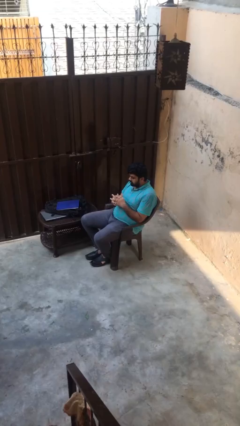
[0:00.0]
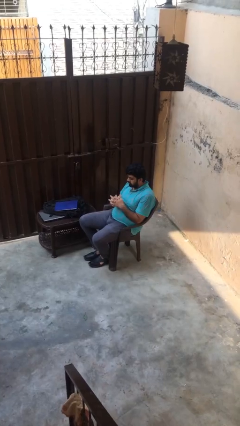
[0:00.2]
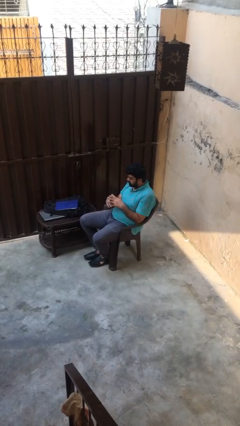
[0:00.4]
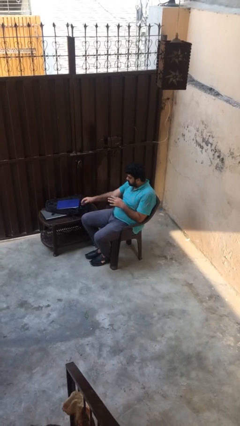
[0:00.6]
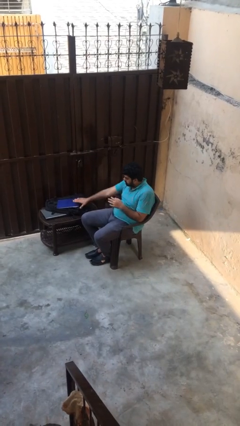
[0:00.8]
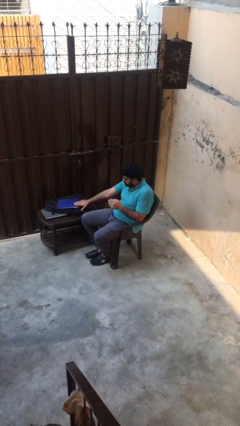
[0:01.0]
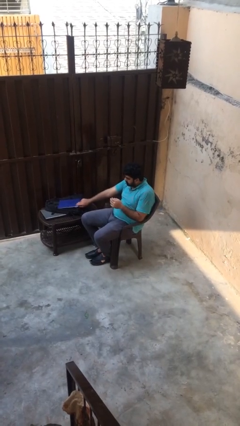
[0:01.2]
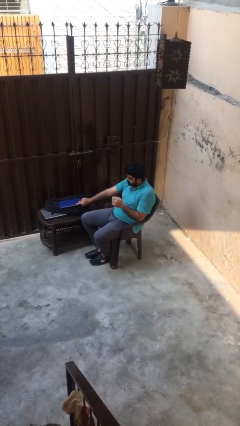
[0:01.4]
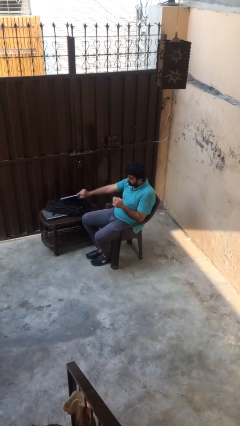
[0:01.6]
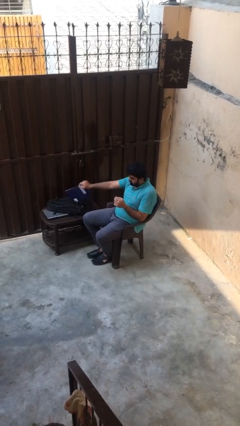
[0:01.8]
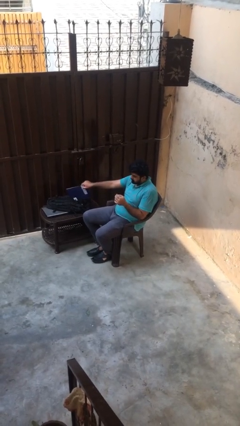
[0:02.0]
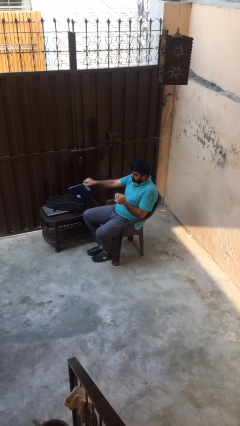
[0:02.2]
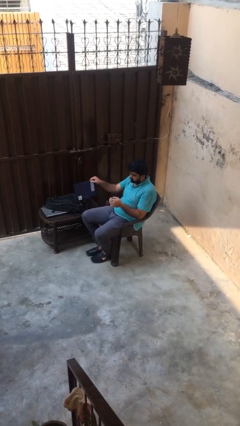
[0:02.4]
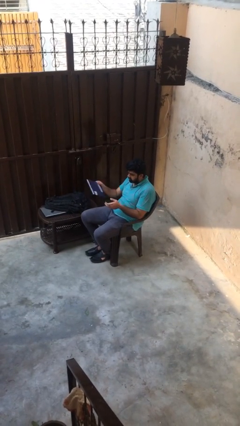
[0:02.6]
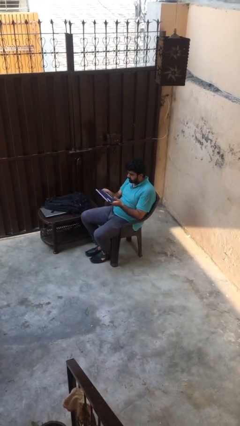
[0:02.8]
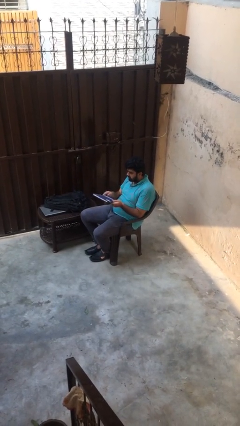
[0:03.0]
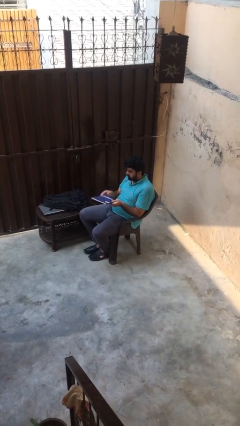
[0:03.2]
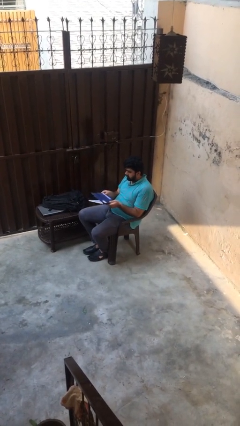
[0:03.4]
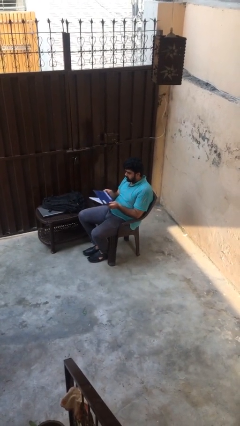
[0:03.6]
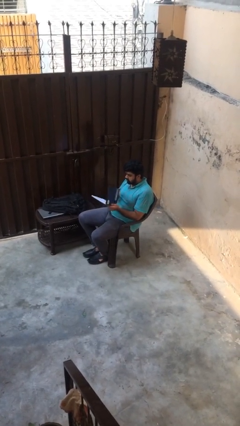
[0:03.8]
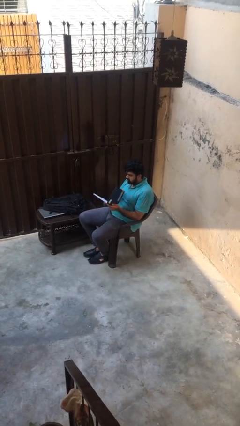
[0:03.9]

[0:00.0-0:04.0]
person picks up object from table

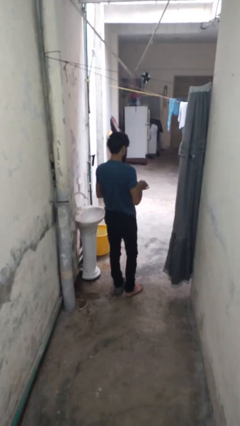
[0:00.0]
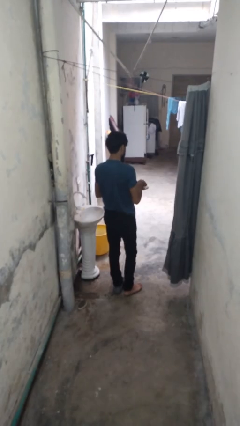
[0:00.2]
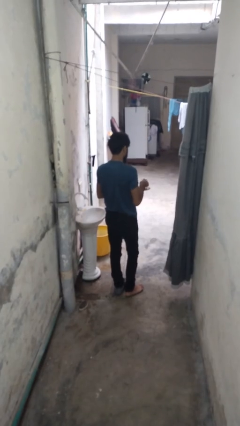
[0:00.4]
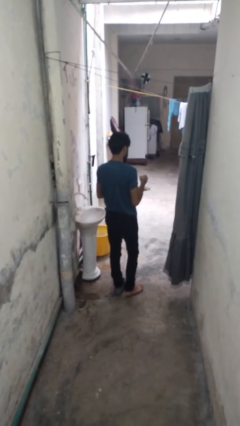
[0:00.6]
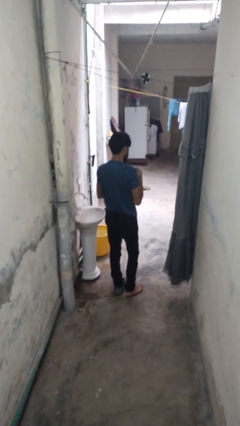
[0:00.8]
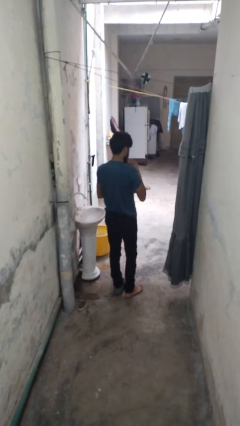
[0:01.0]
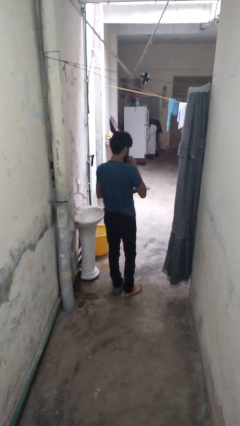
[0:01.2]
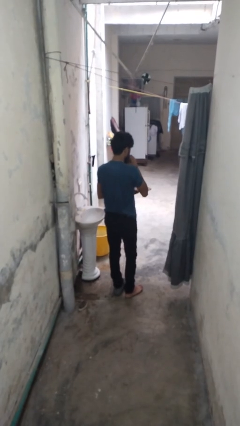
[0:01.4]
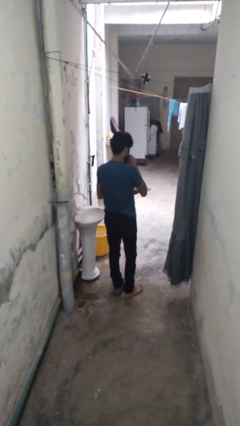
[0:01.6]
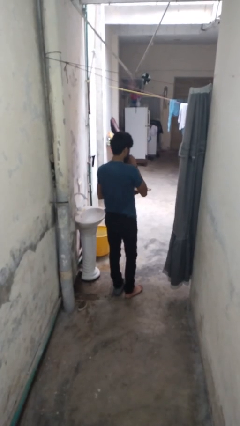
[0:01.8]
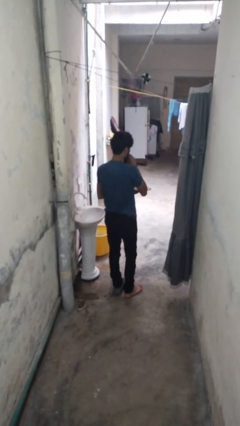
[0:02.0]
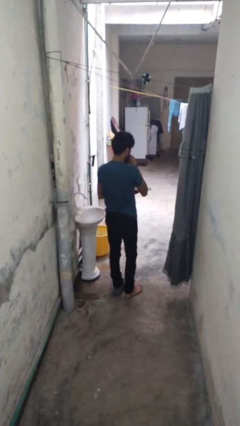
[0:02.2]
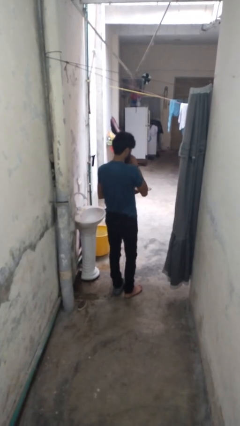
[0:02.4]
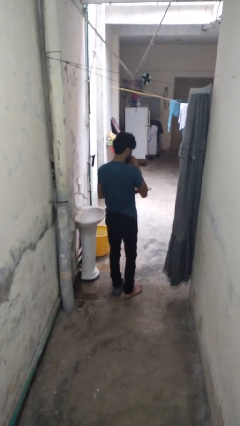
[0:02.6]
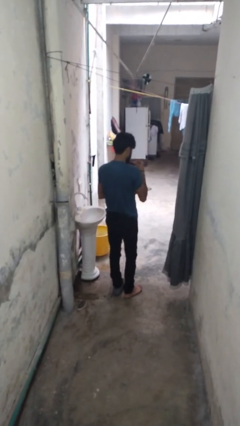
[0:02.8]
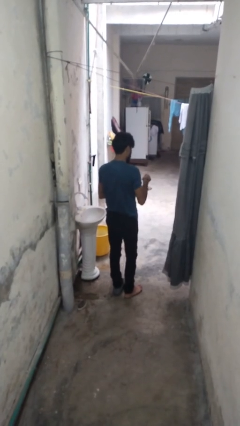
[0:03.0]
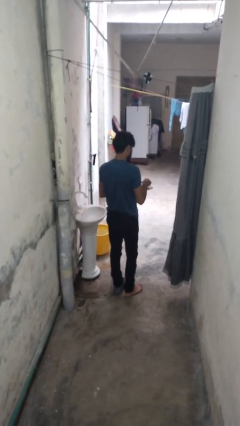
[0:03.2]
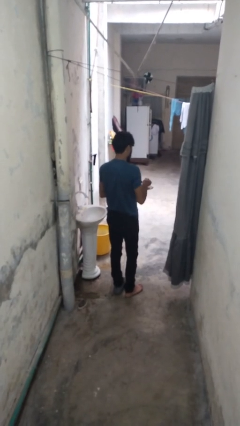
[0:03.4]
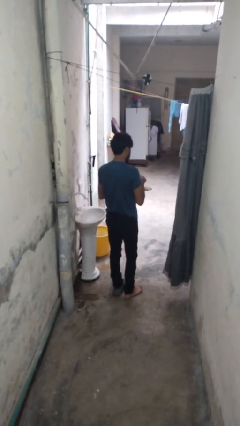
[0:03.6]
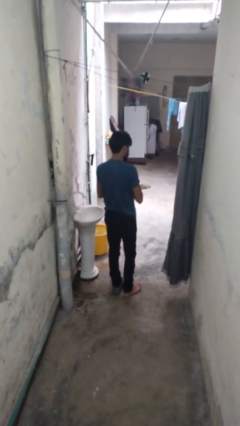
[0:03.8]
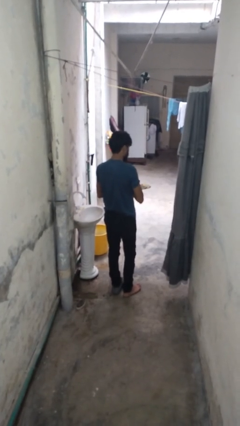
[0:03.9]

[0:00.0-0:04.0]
person eats with hands

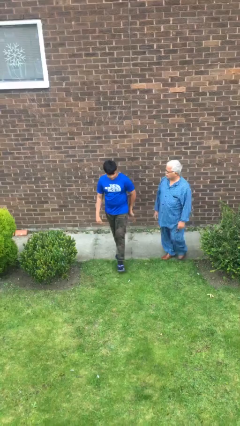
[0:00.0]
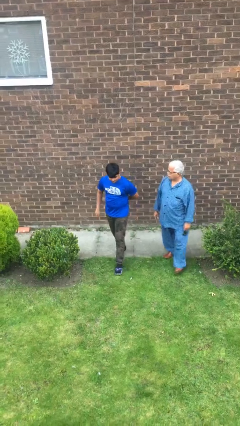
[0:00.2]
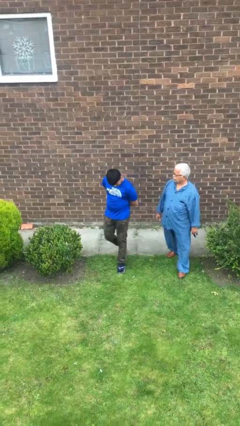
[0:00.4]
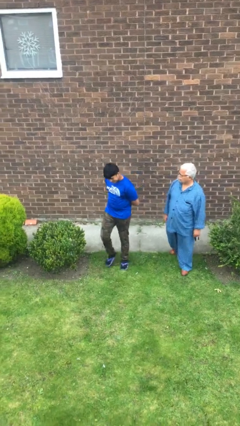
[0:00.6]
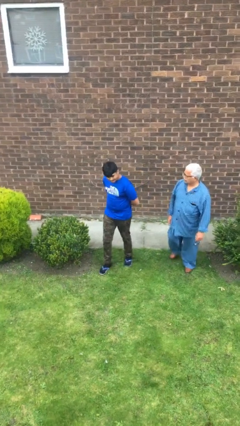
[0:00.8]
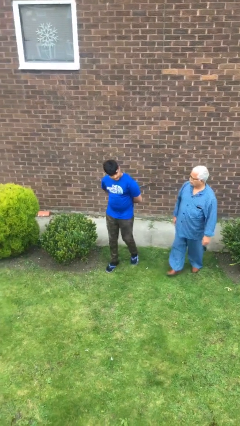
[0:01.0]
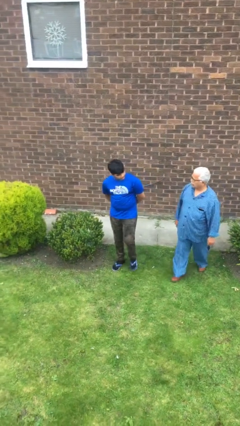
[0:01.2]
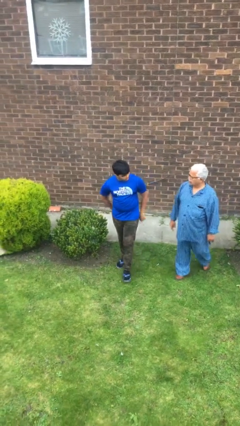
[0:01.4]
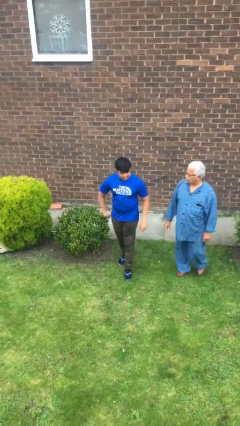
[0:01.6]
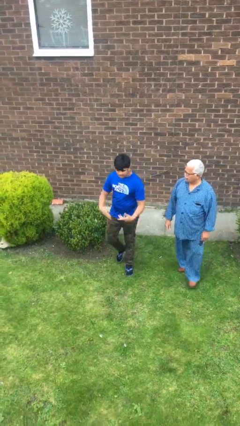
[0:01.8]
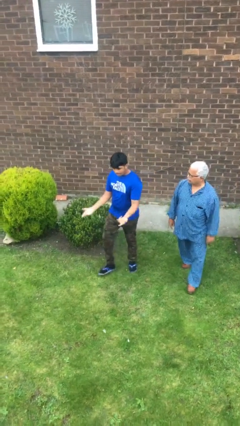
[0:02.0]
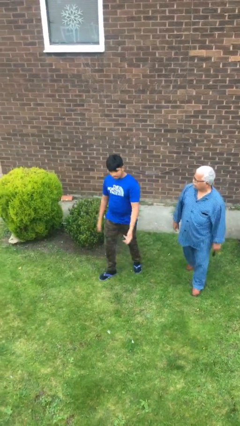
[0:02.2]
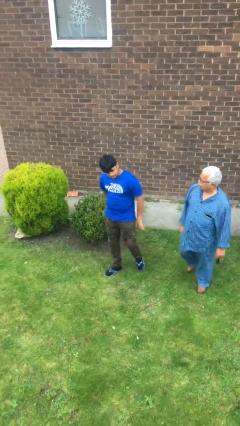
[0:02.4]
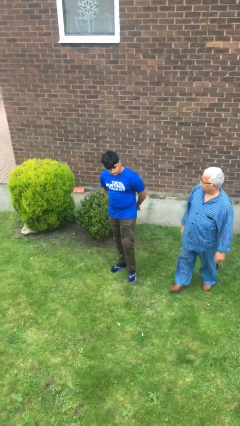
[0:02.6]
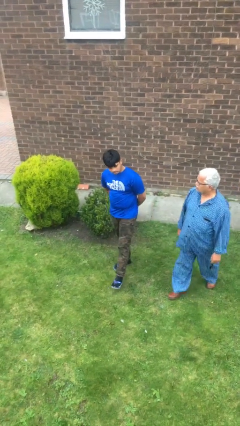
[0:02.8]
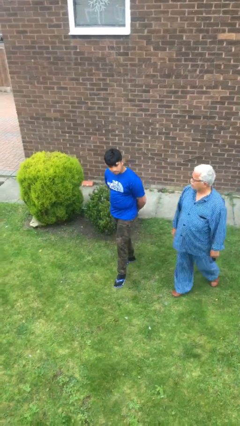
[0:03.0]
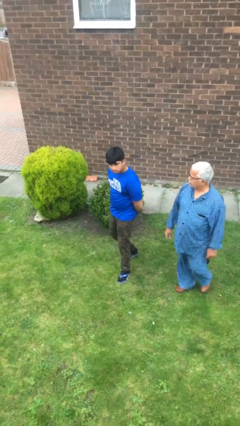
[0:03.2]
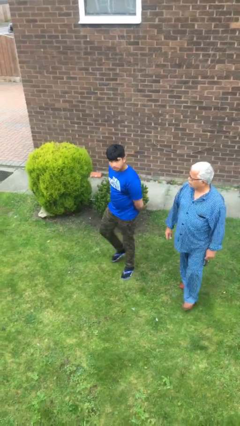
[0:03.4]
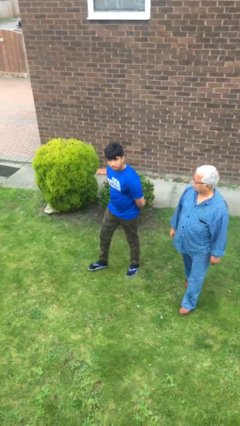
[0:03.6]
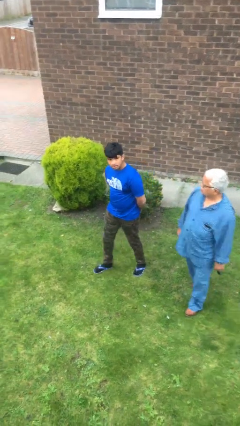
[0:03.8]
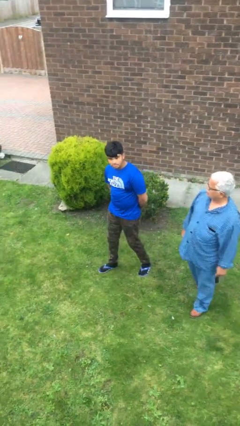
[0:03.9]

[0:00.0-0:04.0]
person talks to person

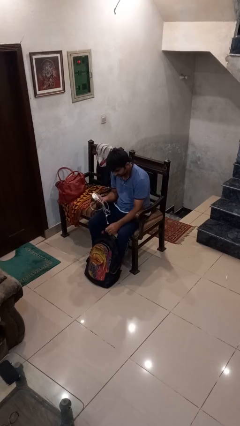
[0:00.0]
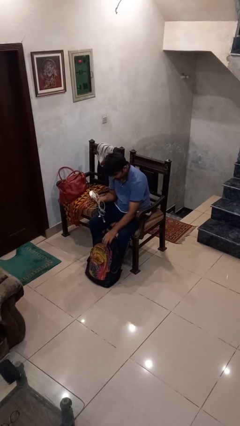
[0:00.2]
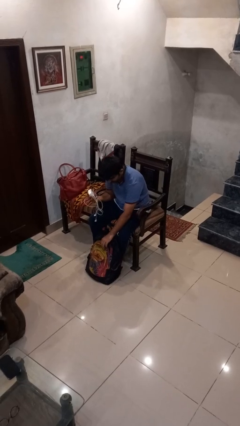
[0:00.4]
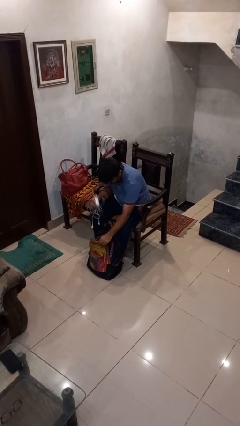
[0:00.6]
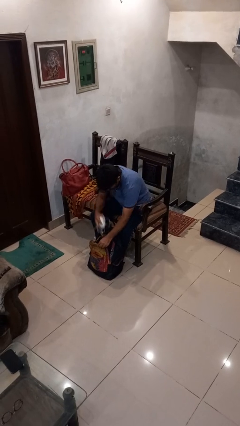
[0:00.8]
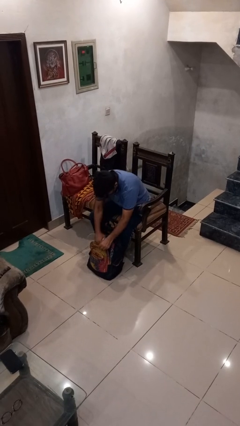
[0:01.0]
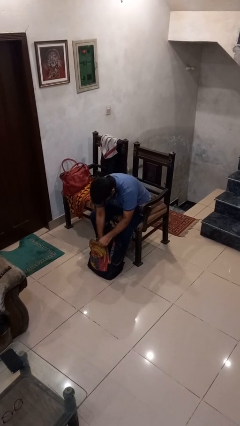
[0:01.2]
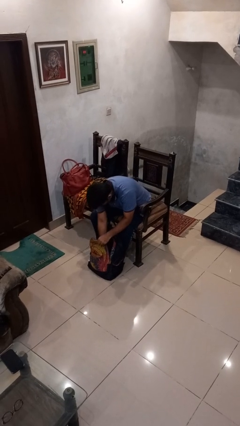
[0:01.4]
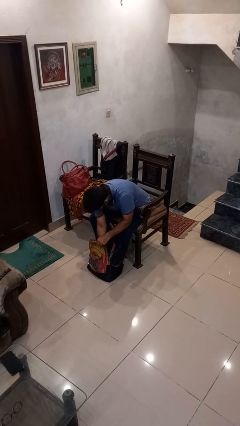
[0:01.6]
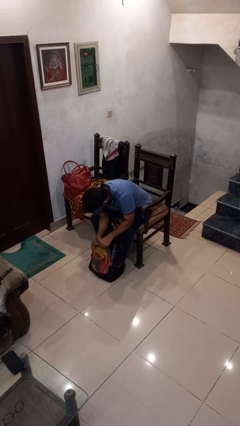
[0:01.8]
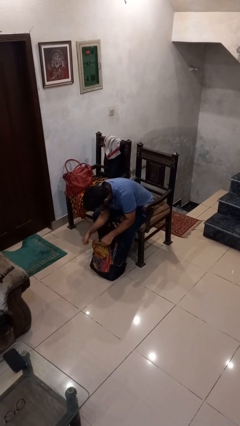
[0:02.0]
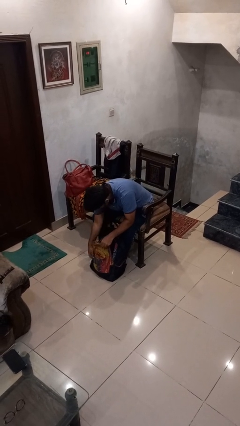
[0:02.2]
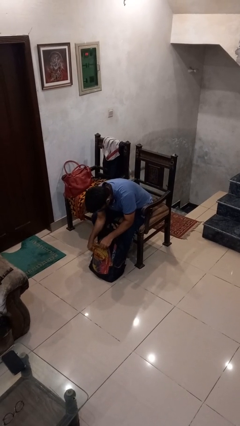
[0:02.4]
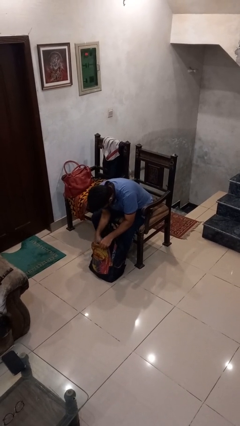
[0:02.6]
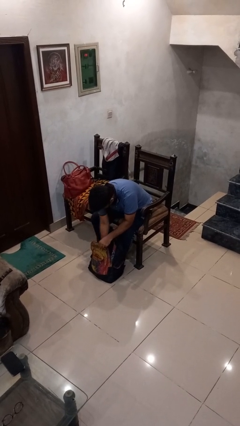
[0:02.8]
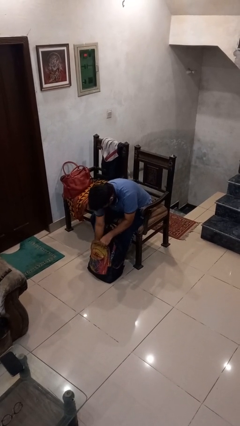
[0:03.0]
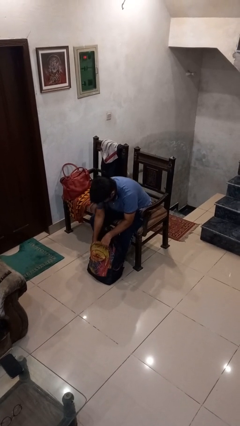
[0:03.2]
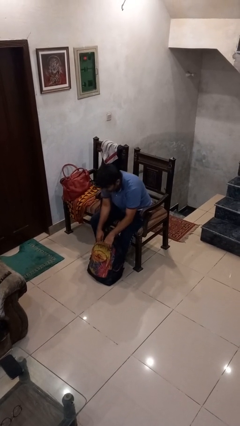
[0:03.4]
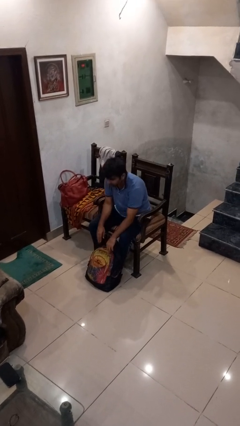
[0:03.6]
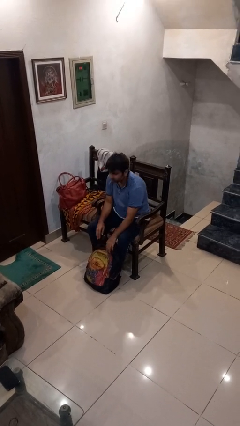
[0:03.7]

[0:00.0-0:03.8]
person puts object into backpack

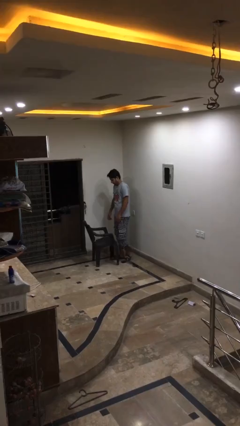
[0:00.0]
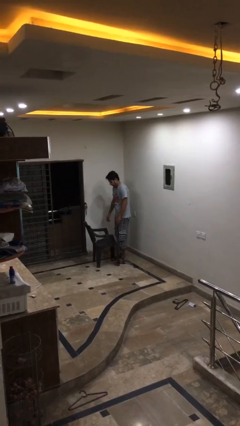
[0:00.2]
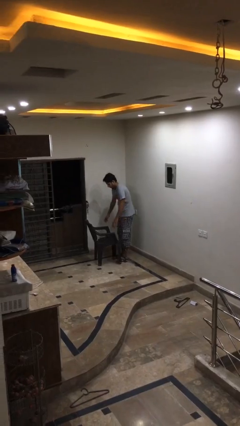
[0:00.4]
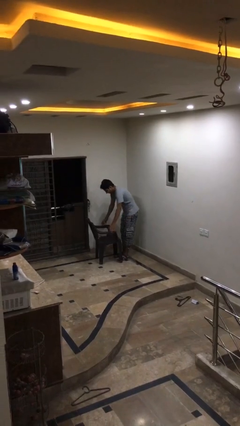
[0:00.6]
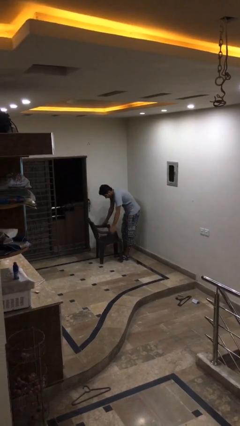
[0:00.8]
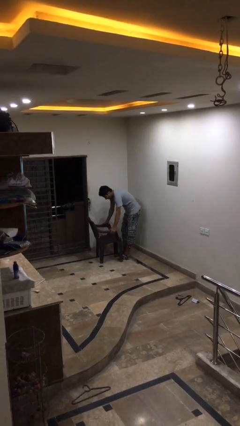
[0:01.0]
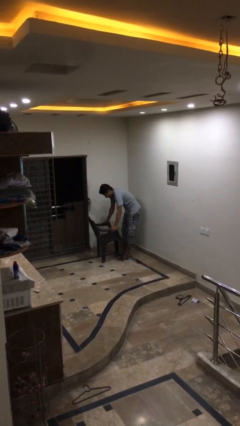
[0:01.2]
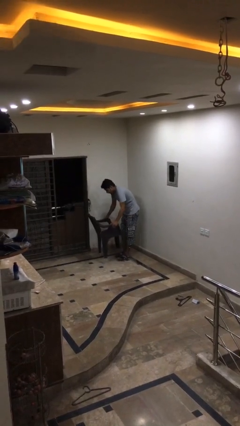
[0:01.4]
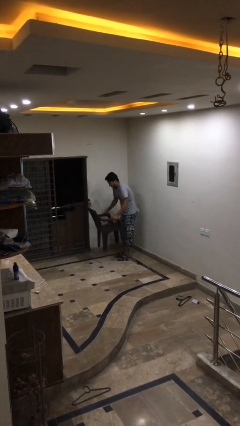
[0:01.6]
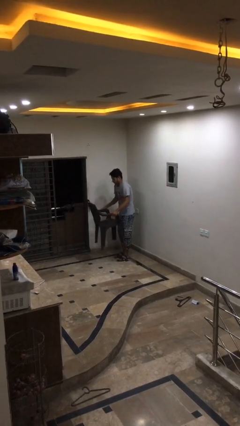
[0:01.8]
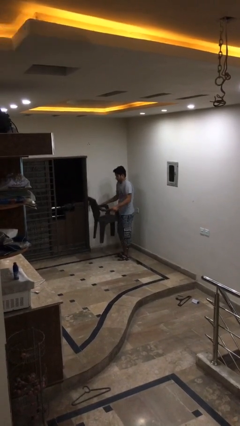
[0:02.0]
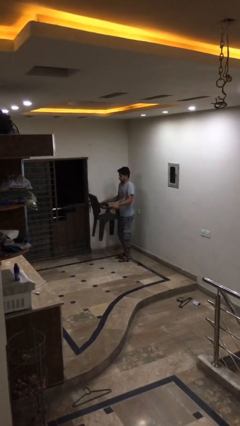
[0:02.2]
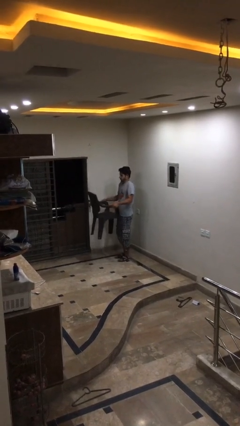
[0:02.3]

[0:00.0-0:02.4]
person picks up object from floor
